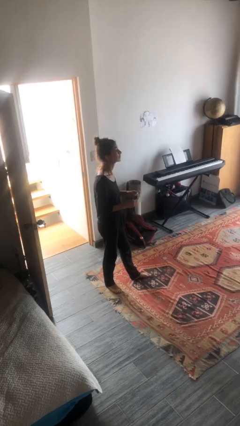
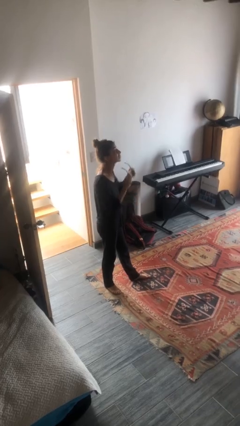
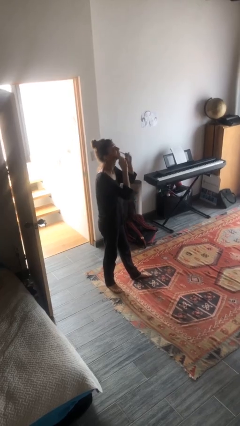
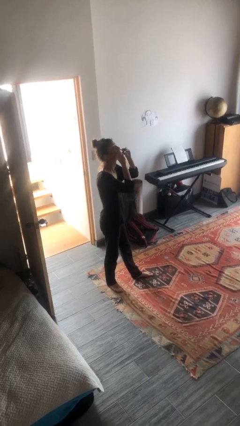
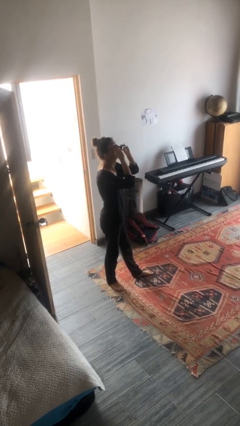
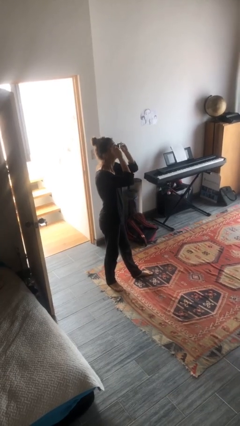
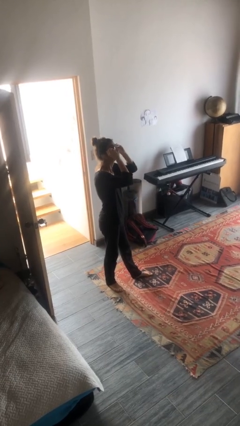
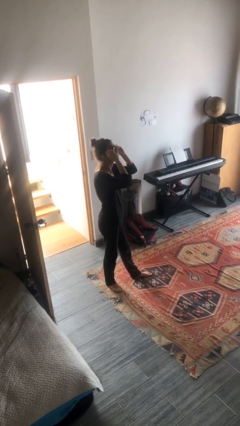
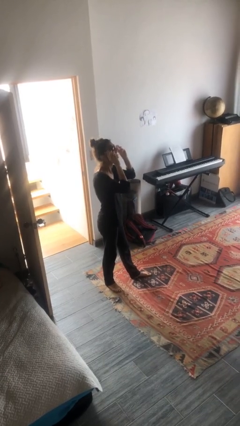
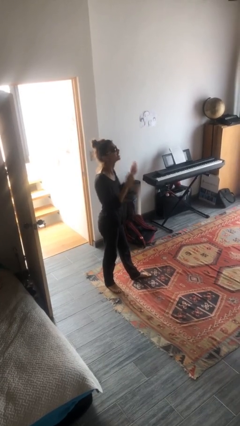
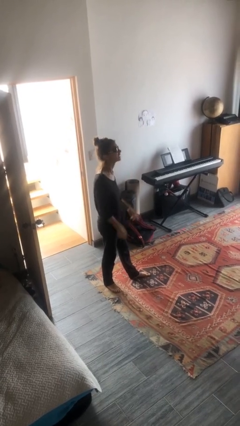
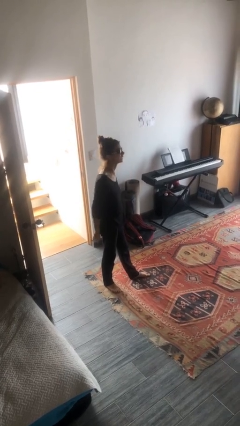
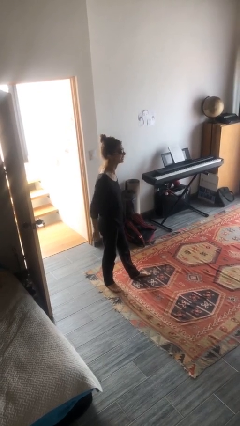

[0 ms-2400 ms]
person puts on sunglasses

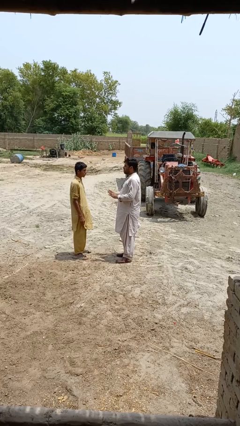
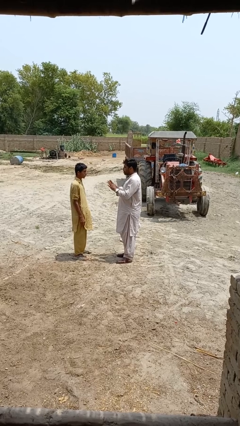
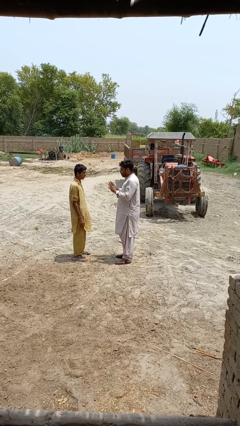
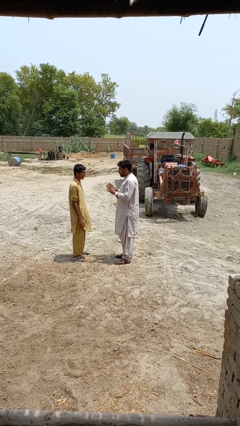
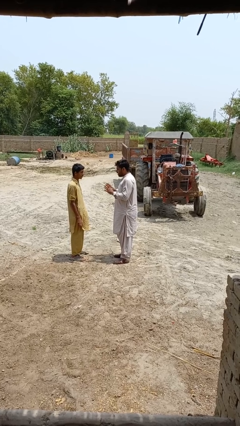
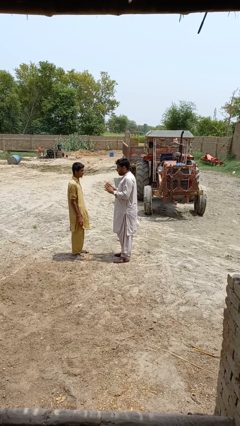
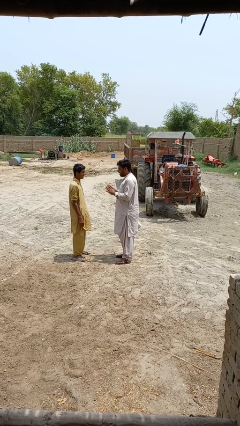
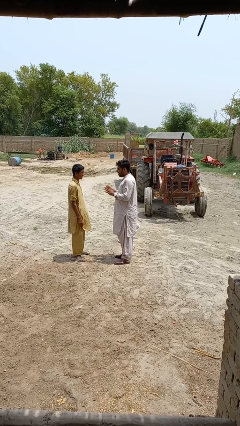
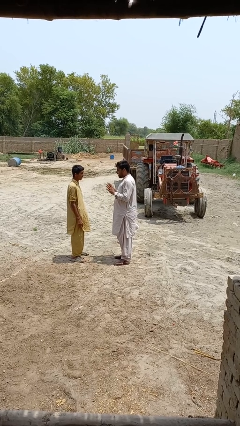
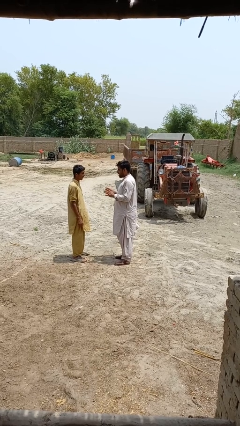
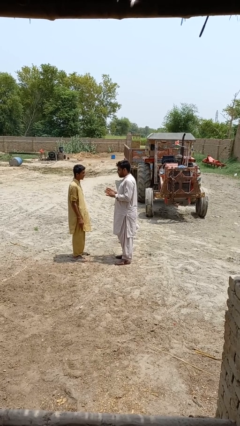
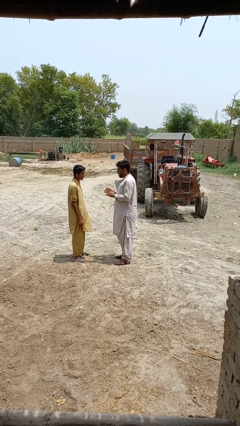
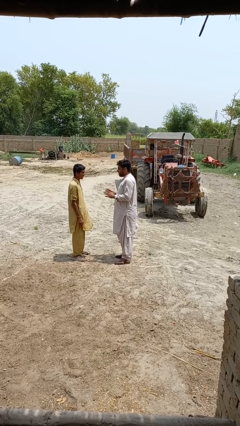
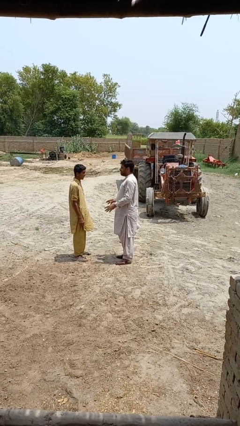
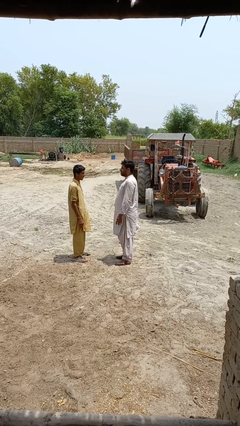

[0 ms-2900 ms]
person talks to person

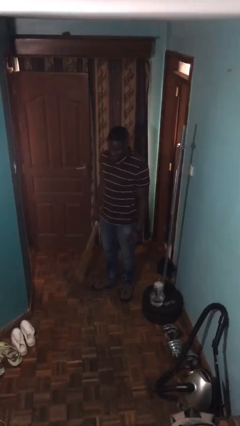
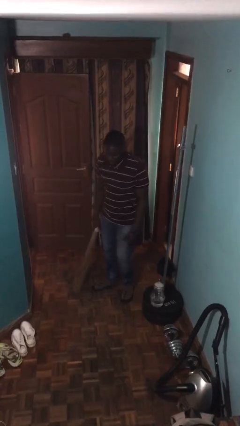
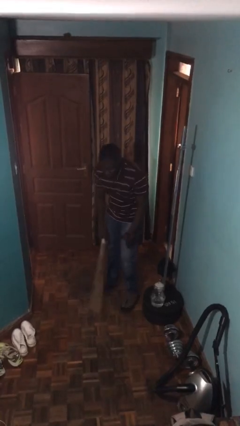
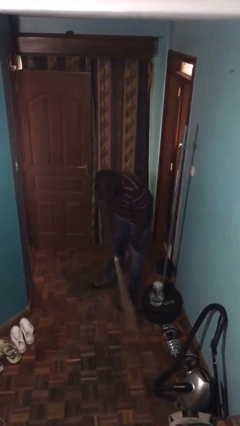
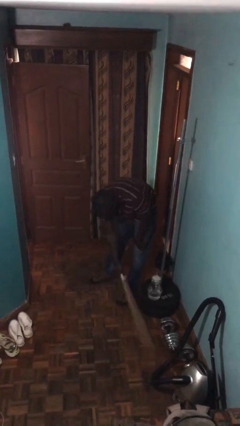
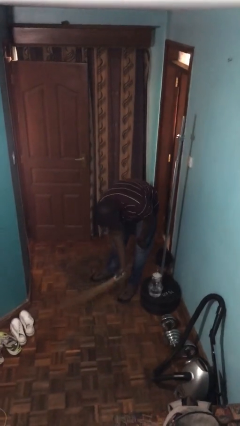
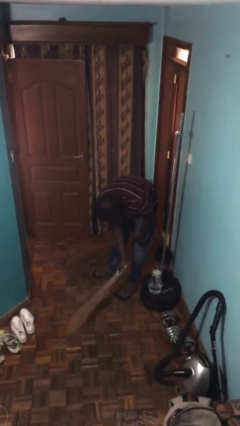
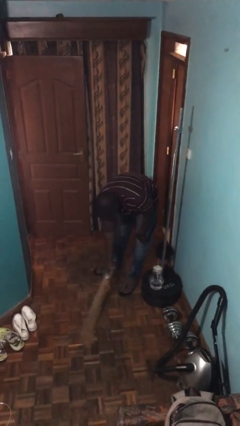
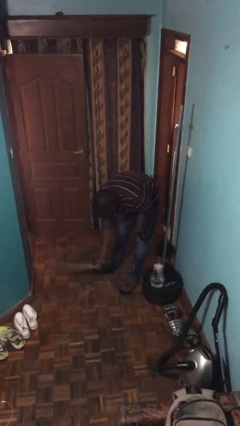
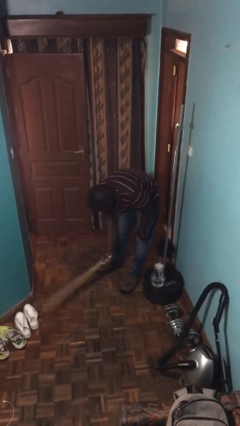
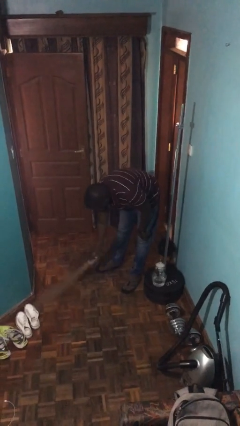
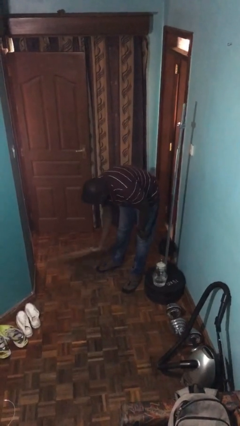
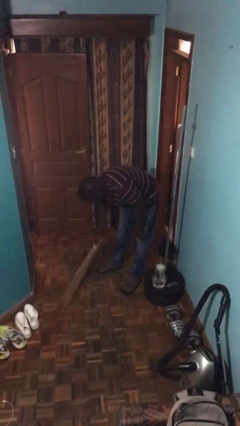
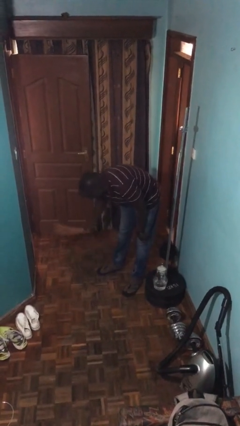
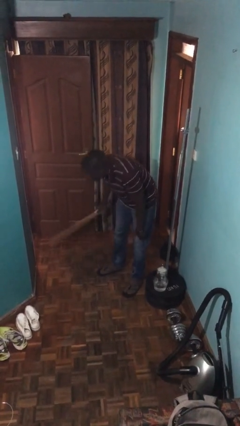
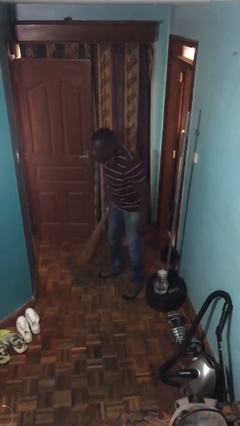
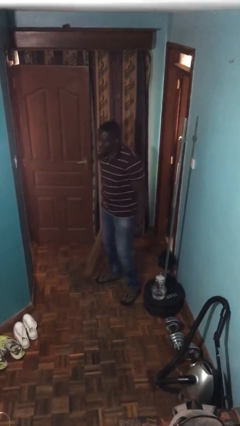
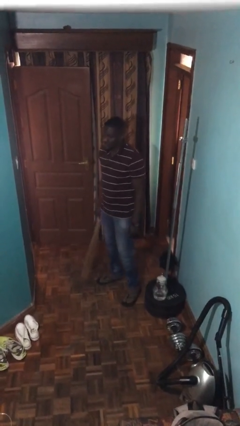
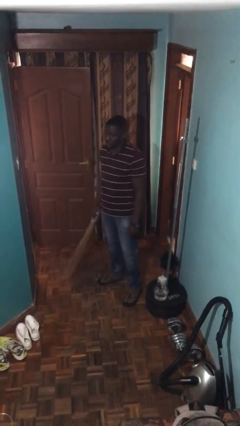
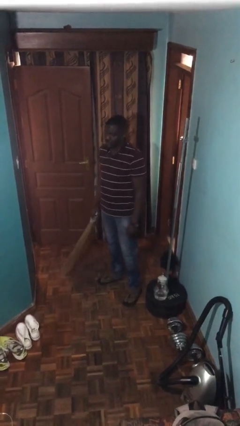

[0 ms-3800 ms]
person sweeps floor

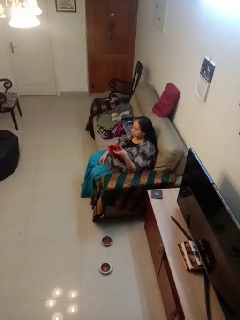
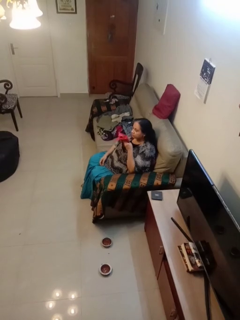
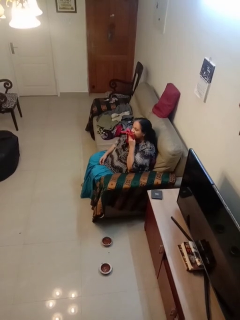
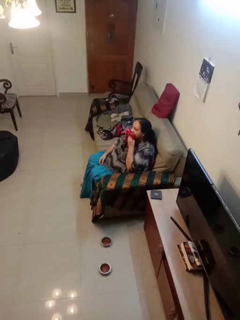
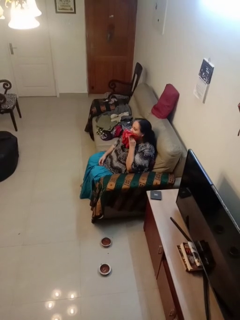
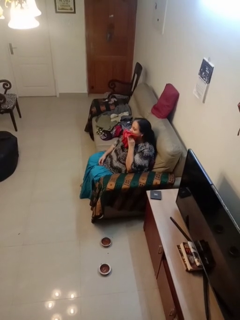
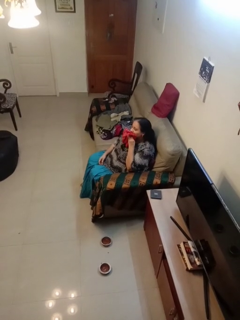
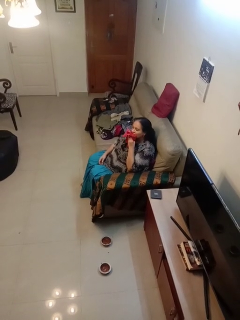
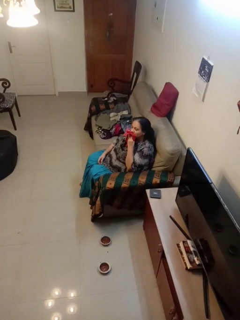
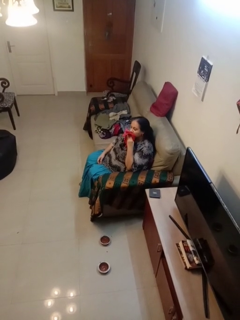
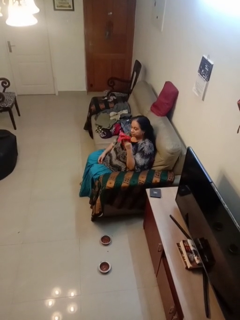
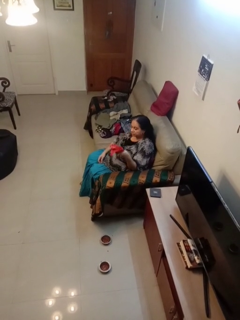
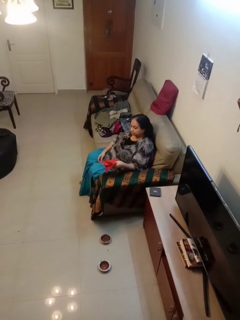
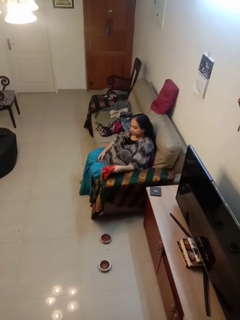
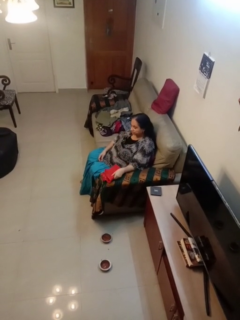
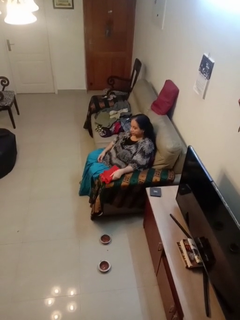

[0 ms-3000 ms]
person wipes mouth with napkin

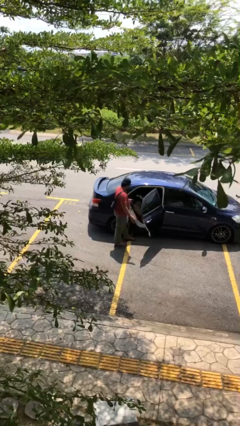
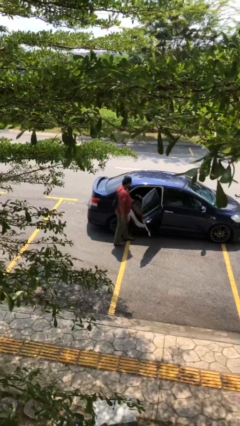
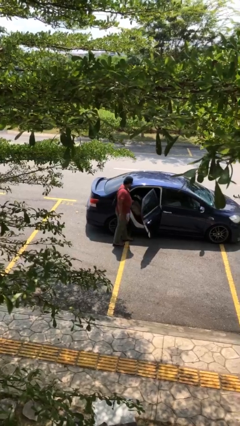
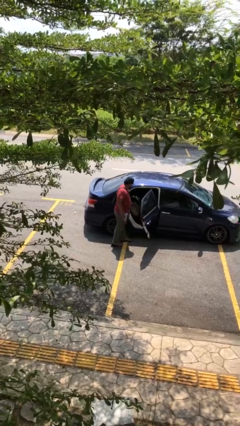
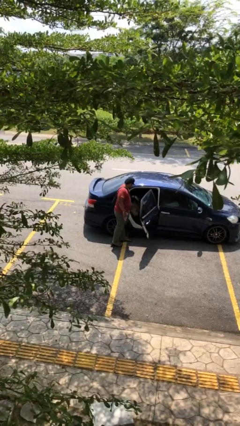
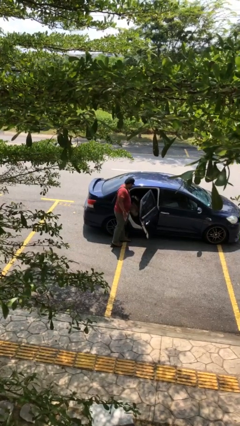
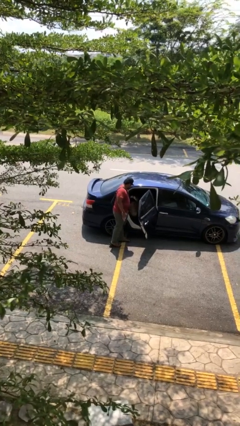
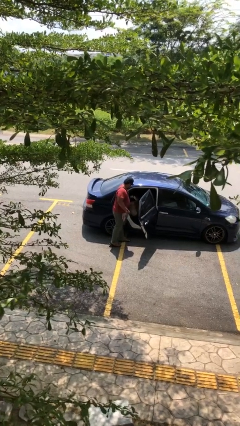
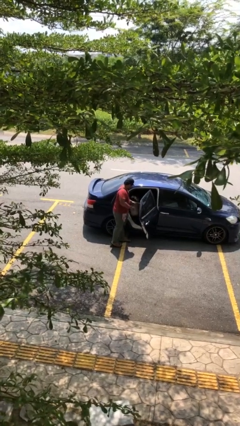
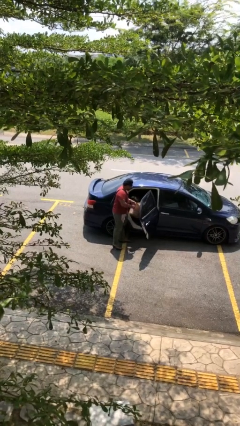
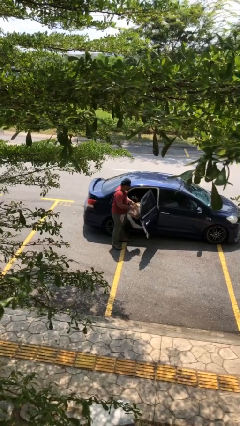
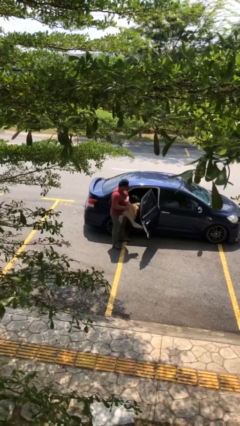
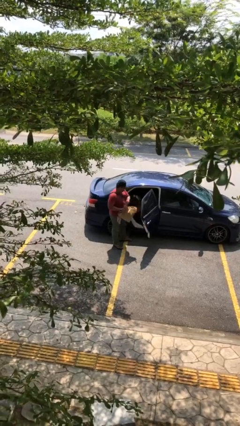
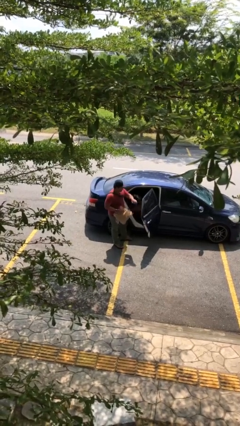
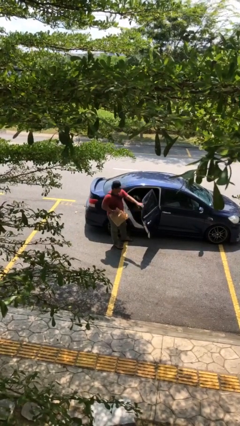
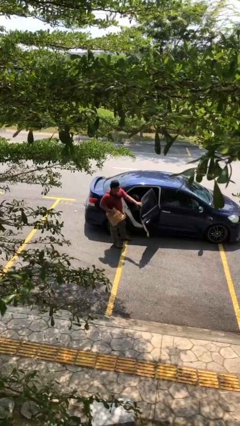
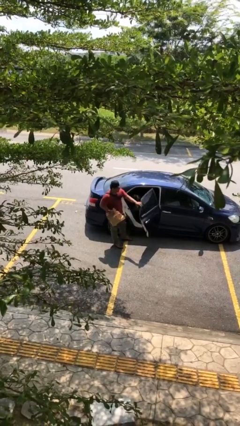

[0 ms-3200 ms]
person unloads car

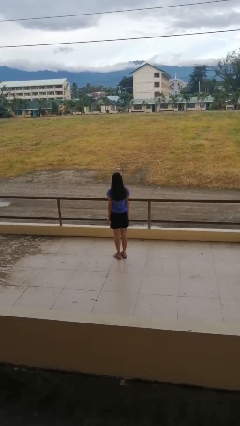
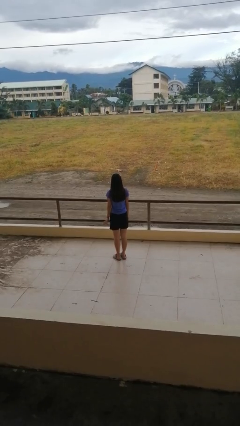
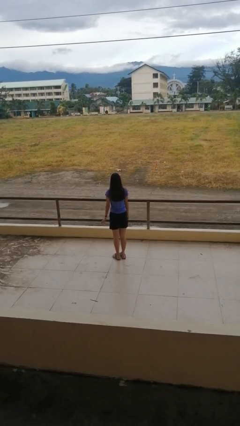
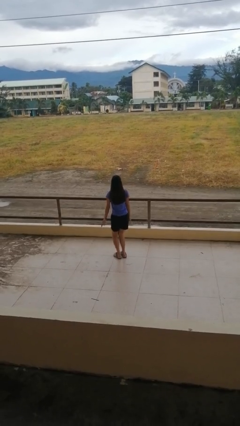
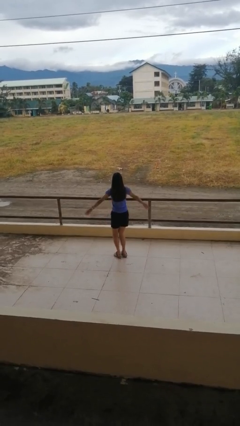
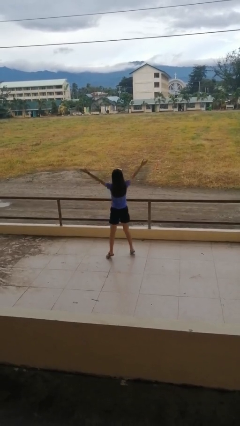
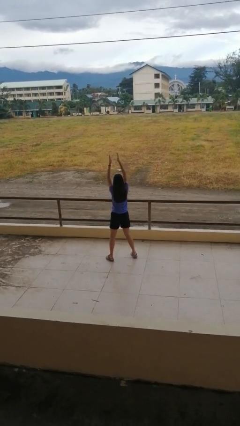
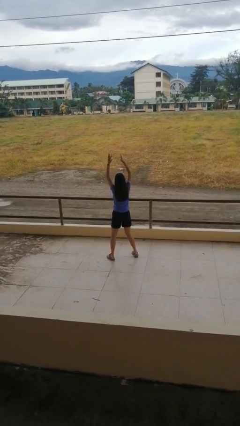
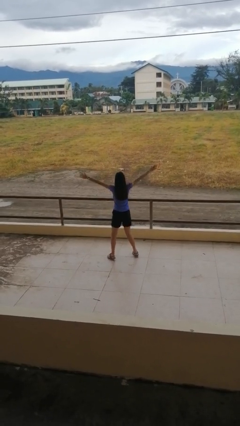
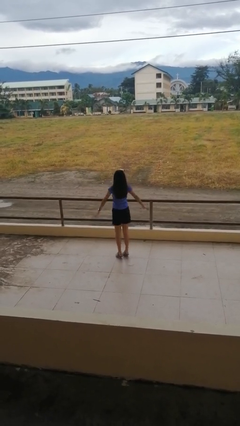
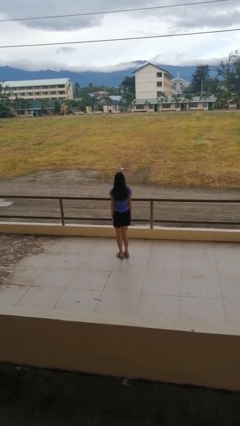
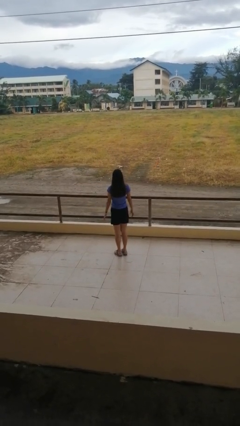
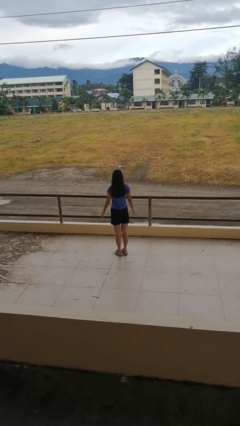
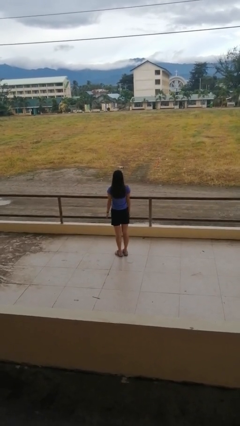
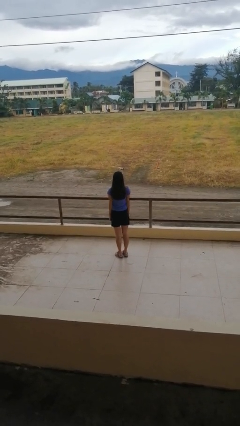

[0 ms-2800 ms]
person exercises with jumping jacks
